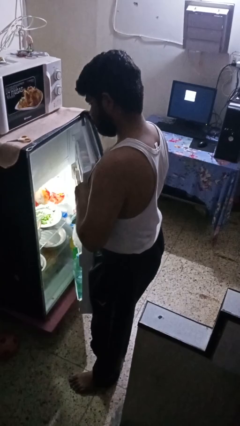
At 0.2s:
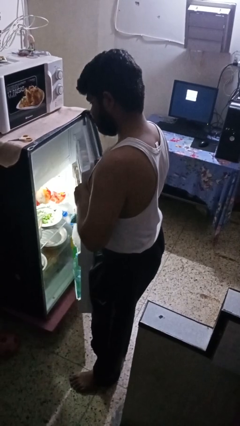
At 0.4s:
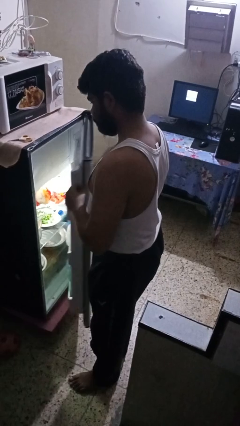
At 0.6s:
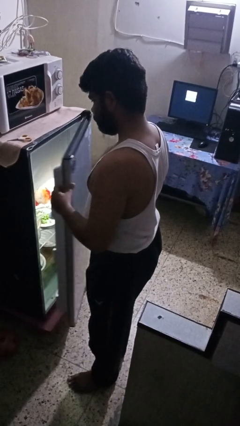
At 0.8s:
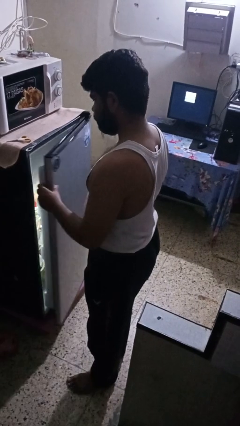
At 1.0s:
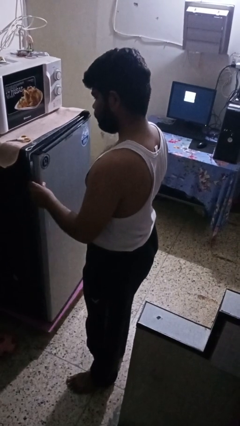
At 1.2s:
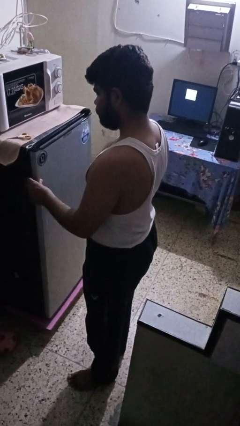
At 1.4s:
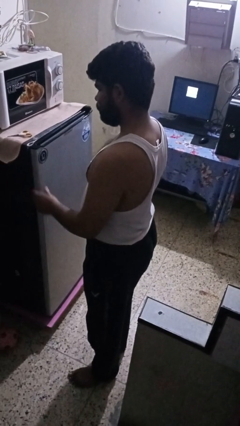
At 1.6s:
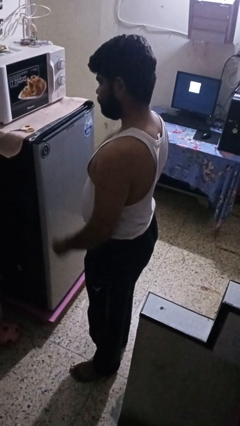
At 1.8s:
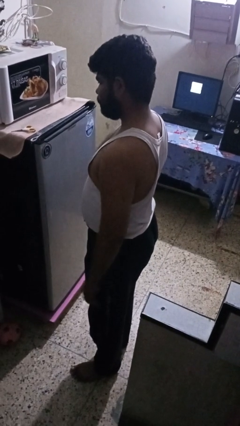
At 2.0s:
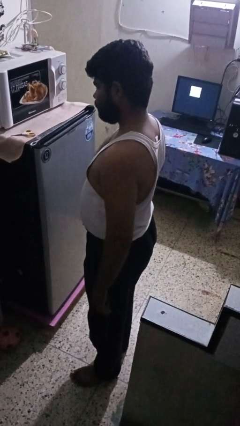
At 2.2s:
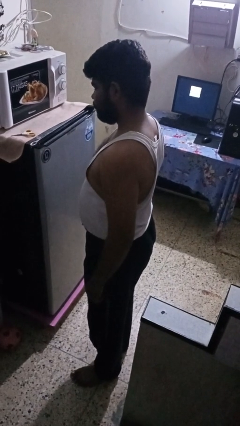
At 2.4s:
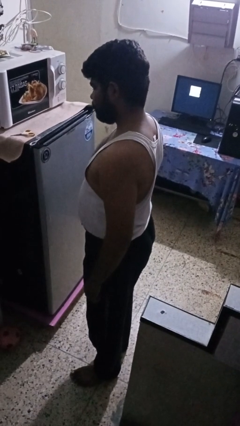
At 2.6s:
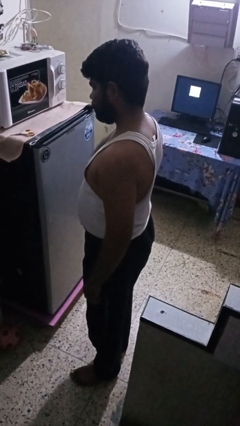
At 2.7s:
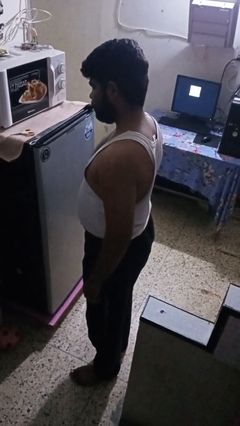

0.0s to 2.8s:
person closes refrigerator

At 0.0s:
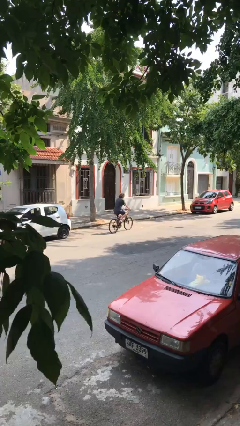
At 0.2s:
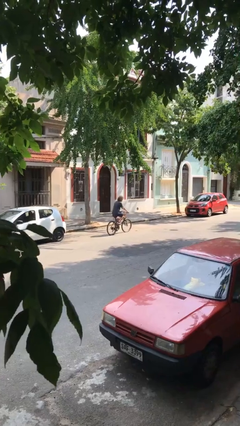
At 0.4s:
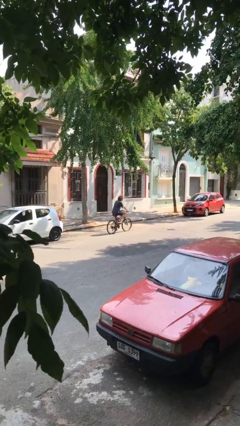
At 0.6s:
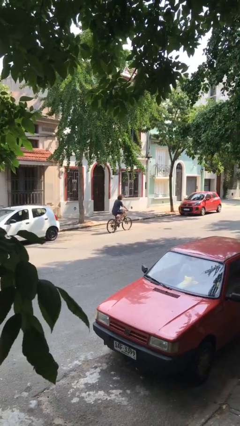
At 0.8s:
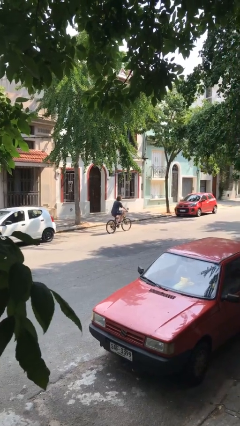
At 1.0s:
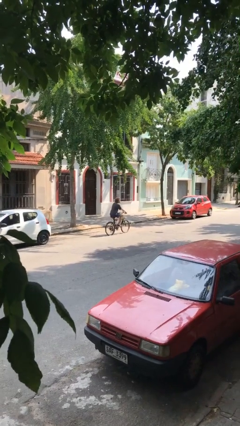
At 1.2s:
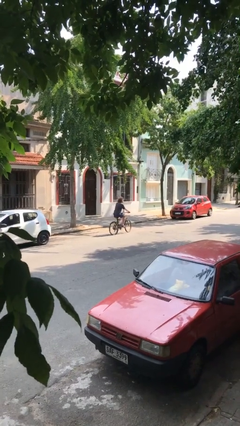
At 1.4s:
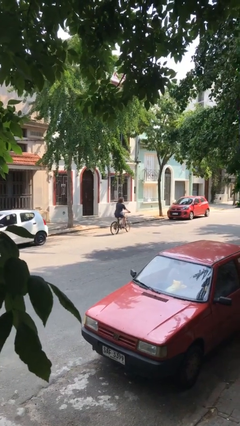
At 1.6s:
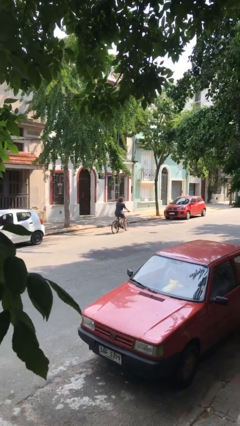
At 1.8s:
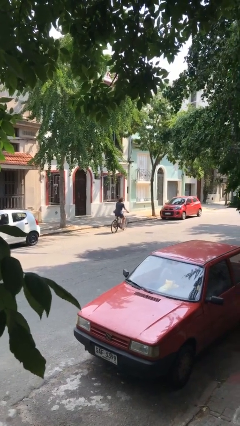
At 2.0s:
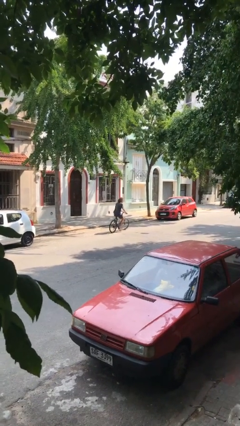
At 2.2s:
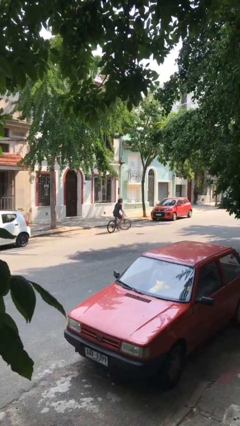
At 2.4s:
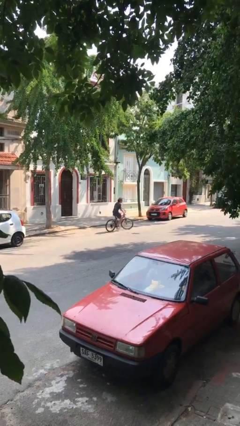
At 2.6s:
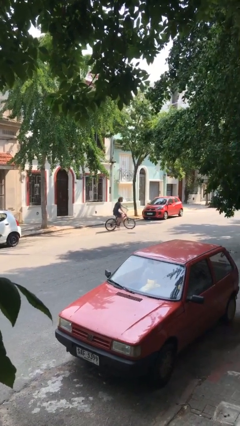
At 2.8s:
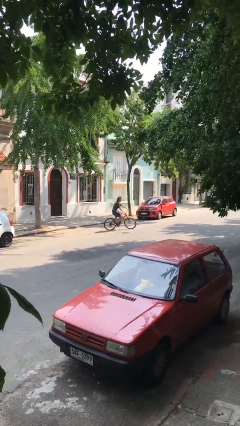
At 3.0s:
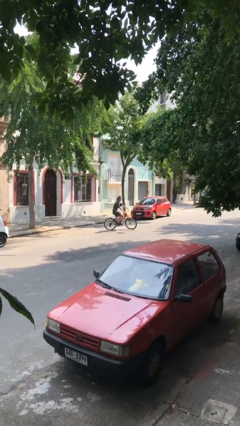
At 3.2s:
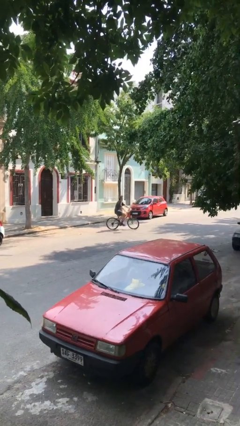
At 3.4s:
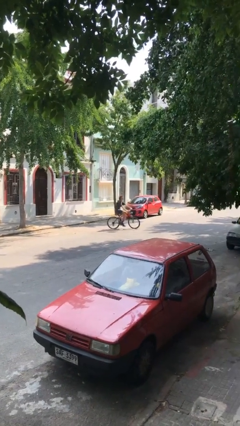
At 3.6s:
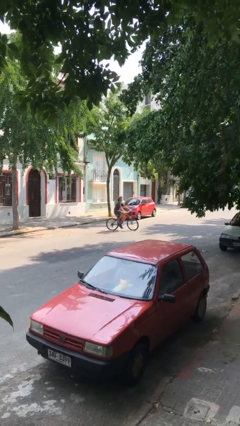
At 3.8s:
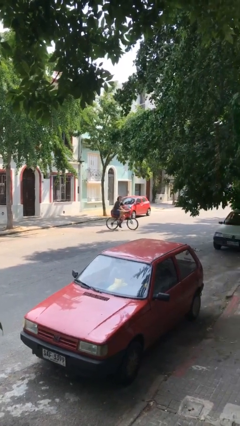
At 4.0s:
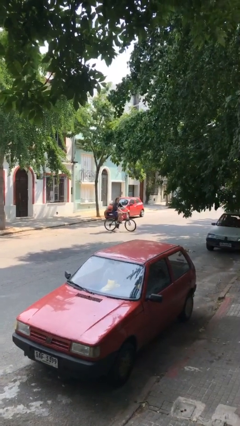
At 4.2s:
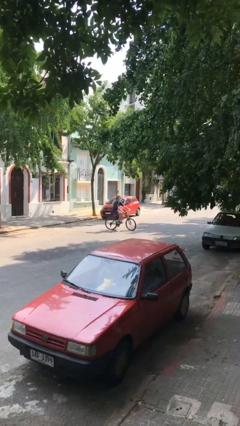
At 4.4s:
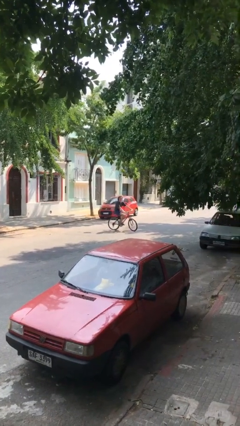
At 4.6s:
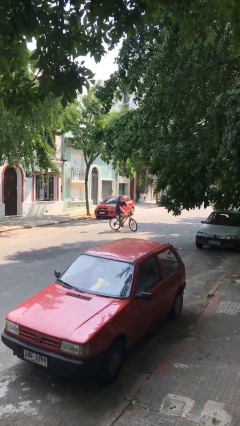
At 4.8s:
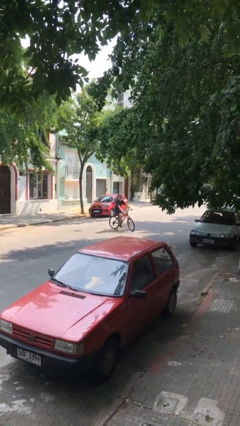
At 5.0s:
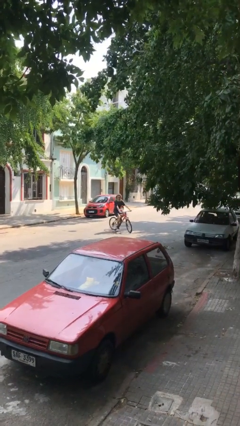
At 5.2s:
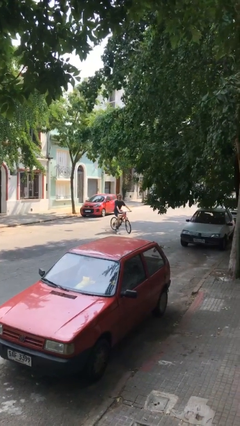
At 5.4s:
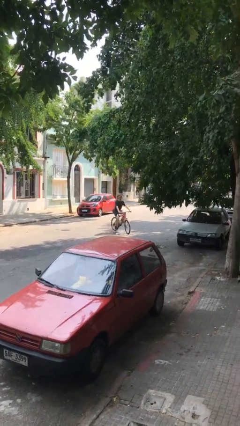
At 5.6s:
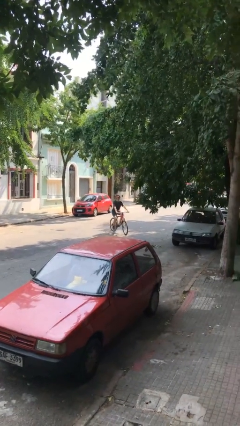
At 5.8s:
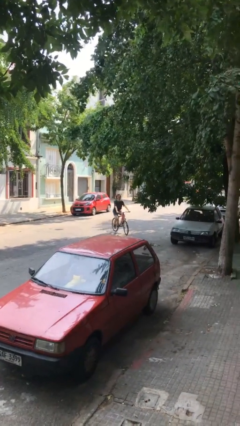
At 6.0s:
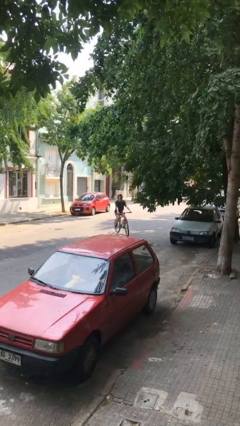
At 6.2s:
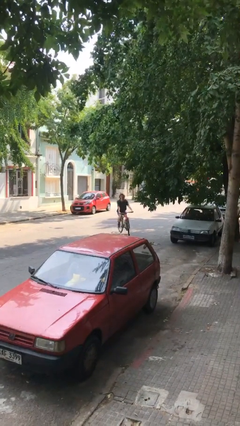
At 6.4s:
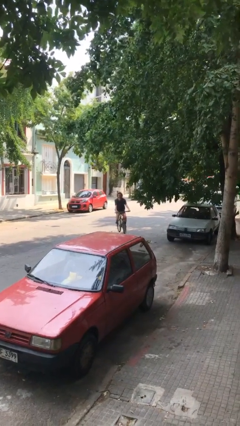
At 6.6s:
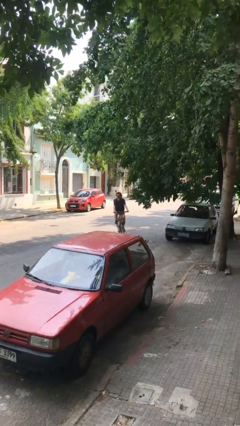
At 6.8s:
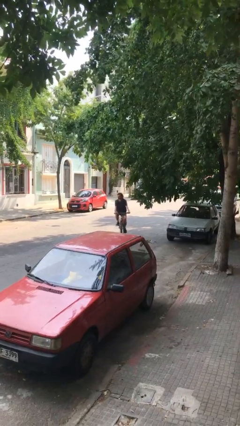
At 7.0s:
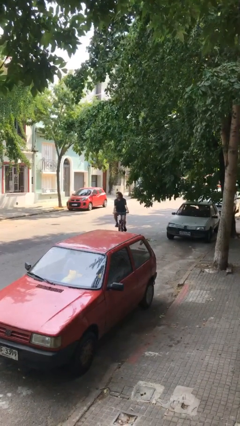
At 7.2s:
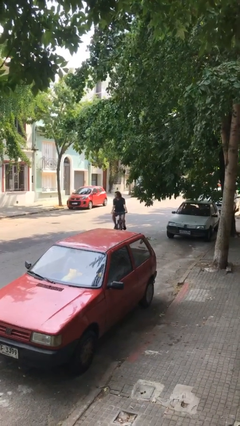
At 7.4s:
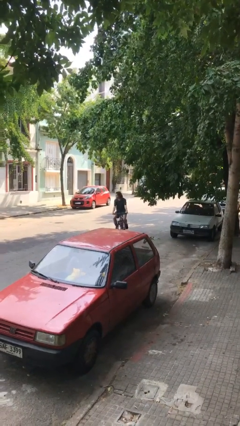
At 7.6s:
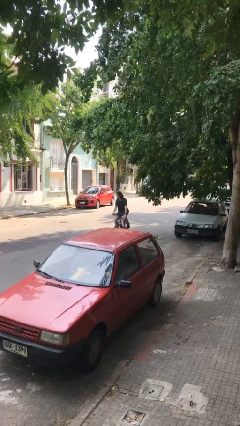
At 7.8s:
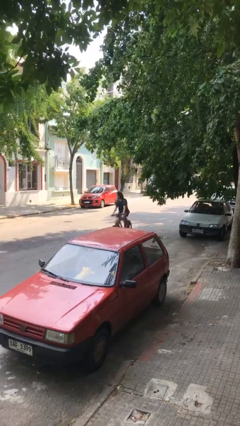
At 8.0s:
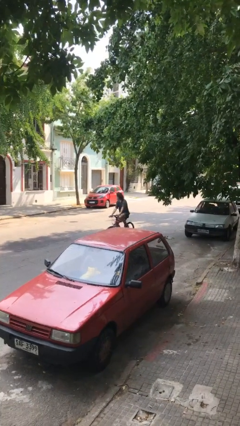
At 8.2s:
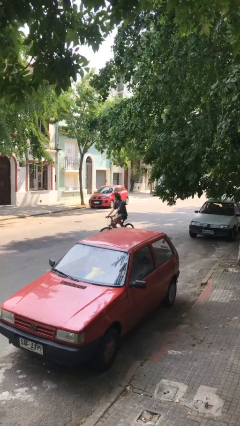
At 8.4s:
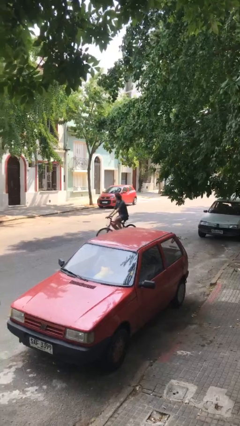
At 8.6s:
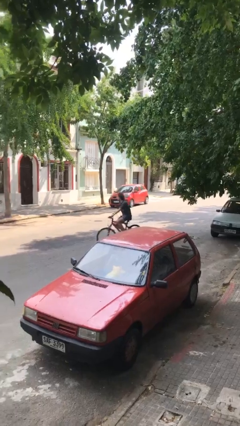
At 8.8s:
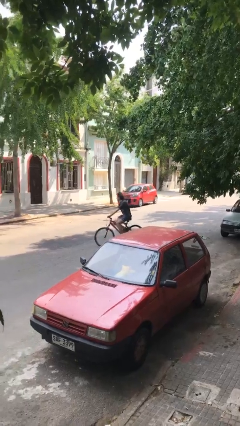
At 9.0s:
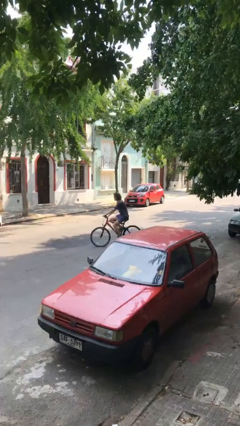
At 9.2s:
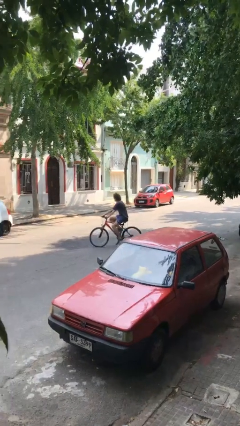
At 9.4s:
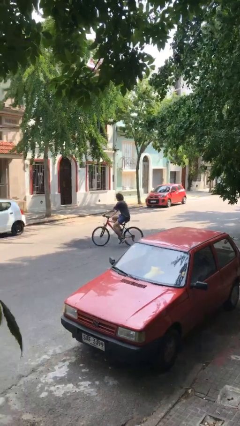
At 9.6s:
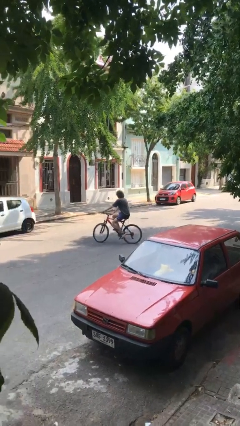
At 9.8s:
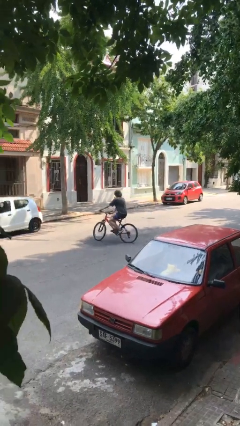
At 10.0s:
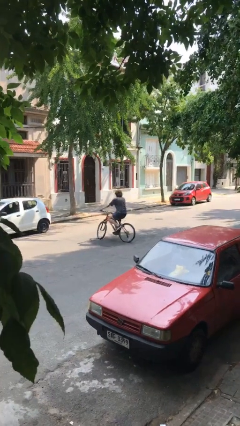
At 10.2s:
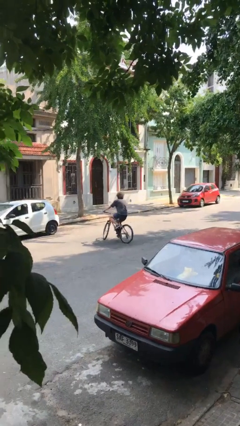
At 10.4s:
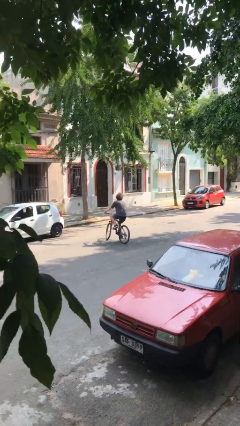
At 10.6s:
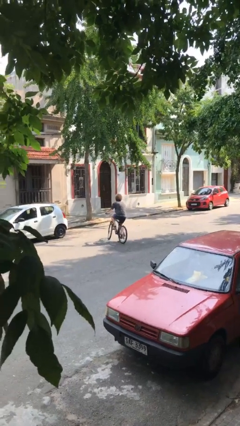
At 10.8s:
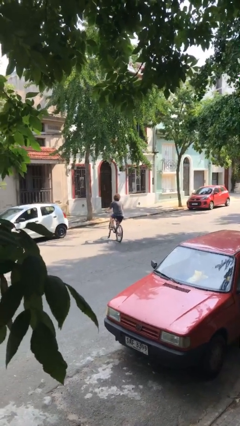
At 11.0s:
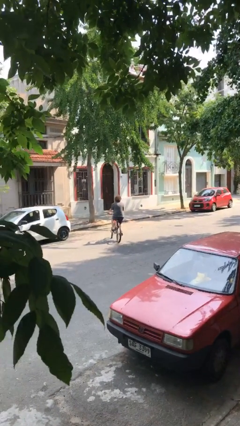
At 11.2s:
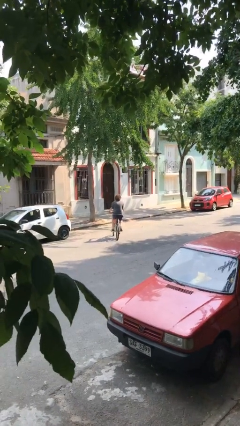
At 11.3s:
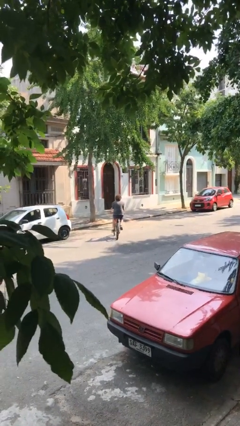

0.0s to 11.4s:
person rides bicycle

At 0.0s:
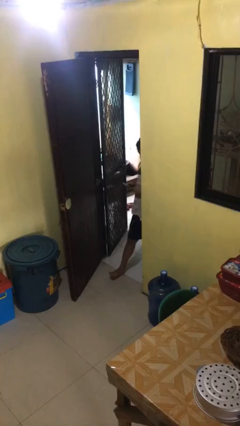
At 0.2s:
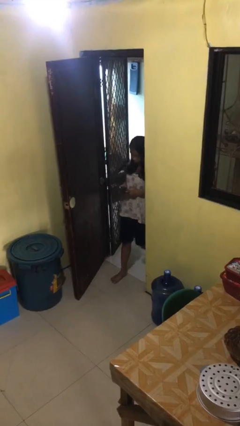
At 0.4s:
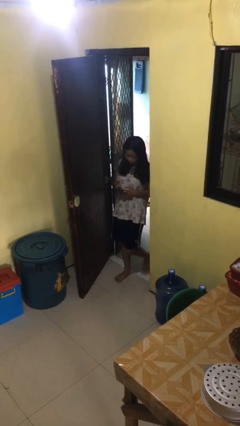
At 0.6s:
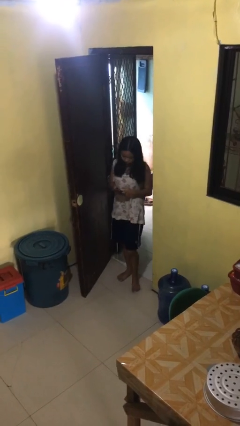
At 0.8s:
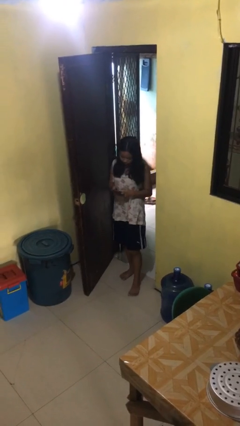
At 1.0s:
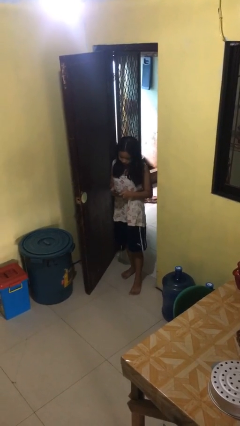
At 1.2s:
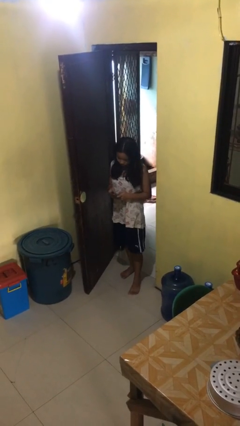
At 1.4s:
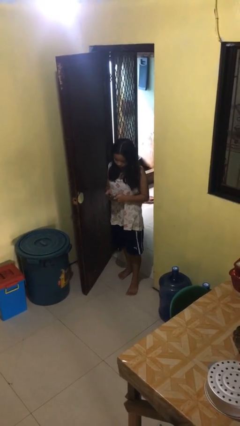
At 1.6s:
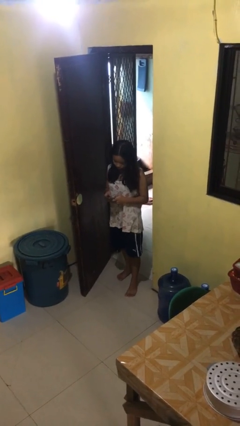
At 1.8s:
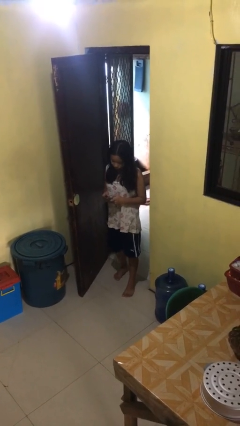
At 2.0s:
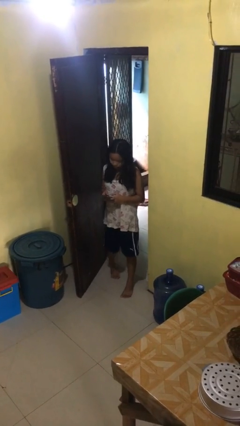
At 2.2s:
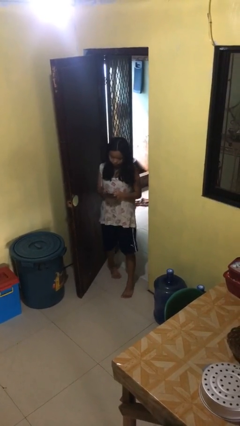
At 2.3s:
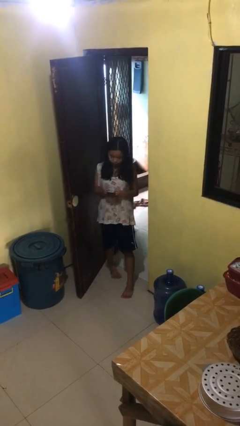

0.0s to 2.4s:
person enters scene through structure

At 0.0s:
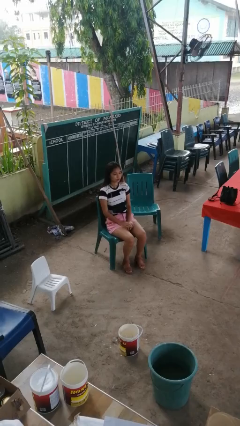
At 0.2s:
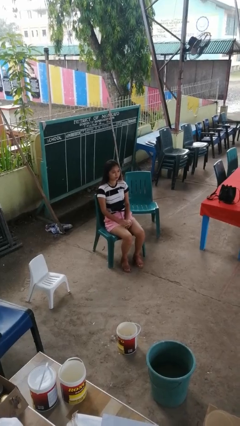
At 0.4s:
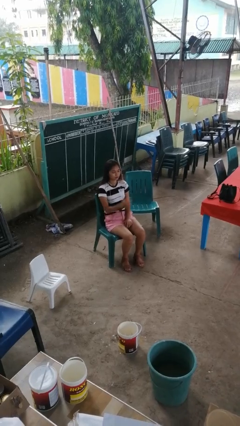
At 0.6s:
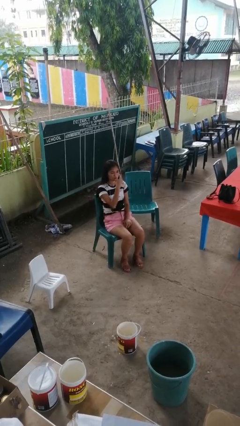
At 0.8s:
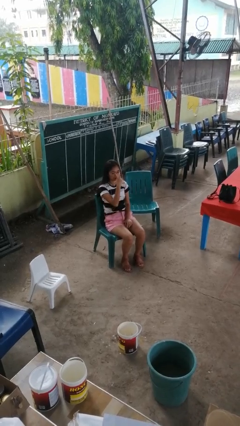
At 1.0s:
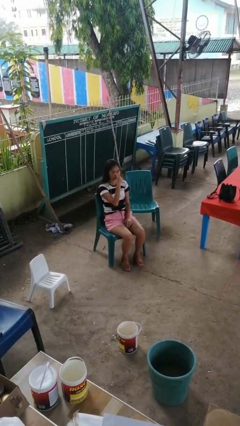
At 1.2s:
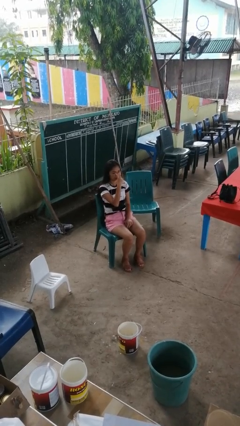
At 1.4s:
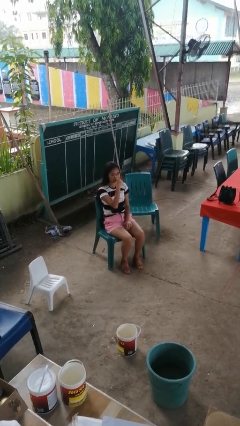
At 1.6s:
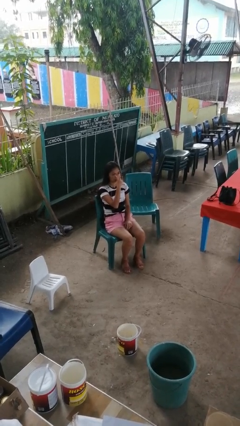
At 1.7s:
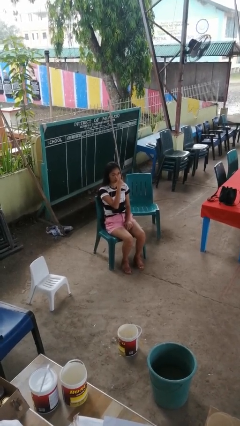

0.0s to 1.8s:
person gestures watch closely
